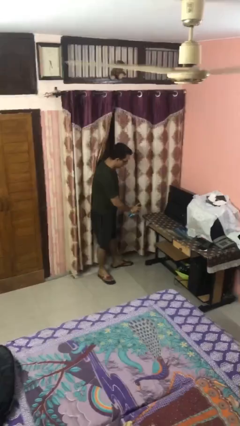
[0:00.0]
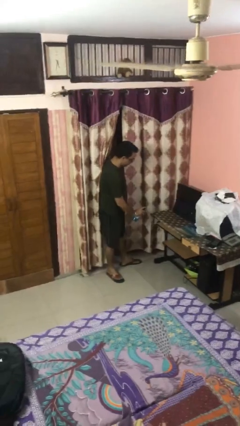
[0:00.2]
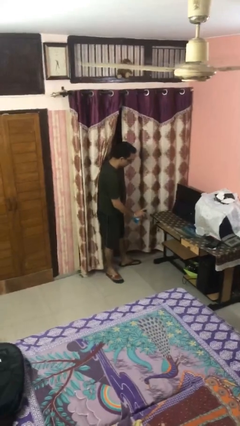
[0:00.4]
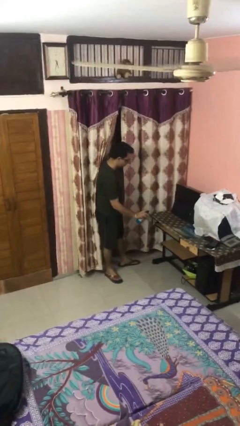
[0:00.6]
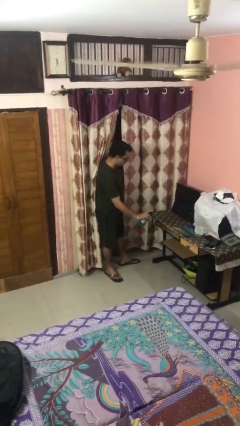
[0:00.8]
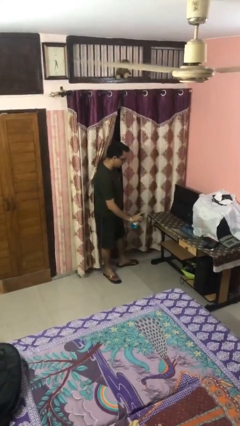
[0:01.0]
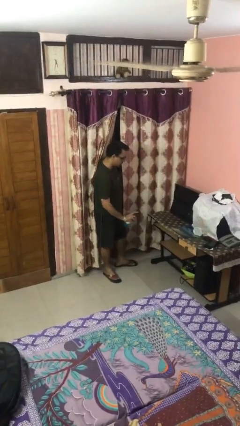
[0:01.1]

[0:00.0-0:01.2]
person sprays from bottle

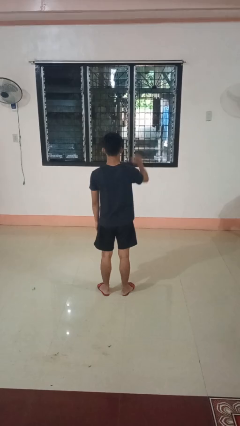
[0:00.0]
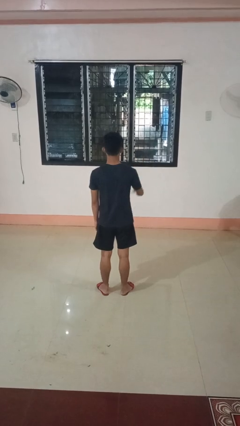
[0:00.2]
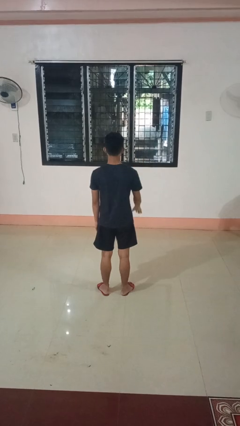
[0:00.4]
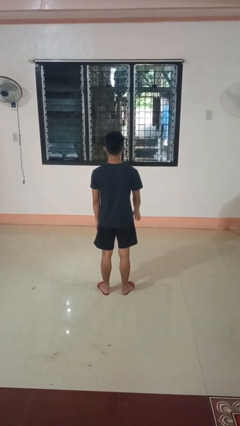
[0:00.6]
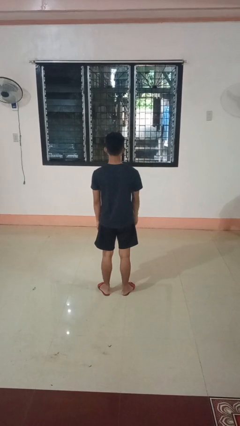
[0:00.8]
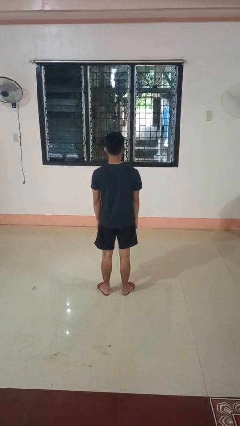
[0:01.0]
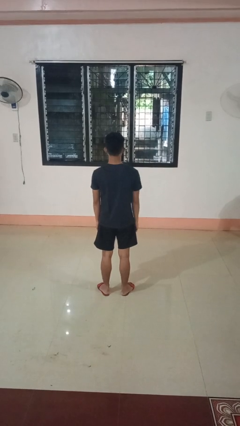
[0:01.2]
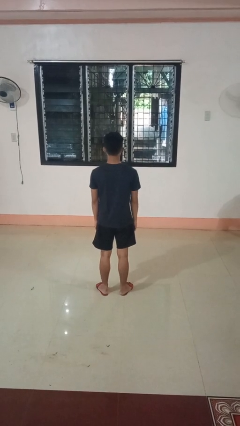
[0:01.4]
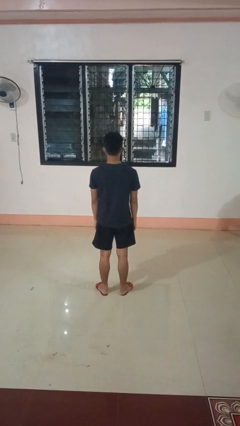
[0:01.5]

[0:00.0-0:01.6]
person gestures swipe down

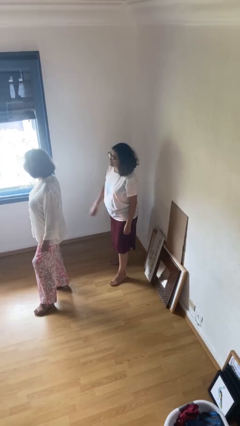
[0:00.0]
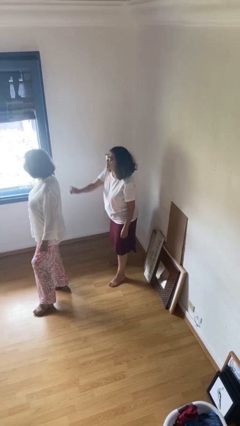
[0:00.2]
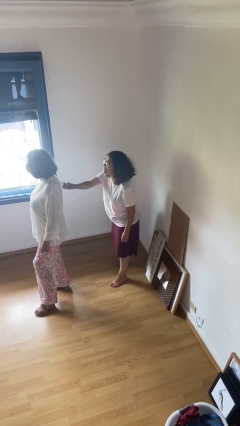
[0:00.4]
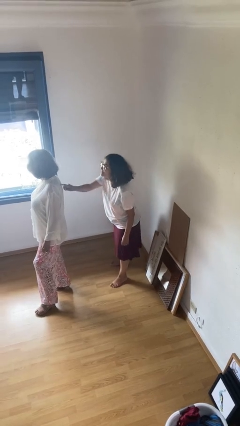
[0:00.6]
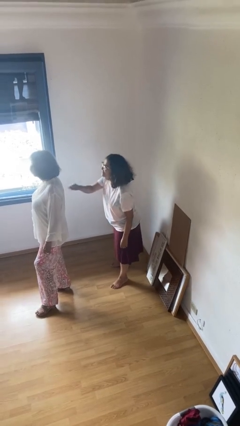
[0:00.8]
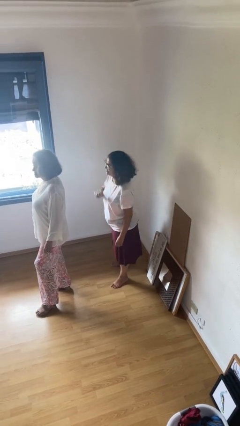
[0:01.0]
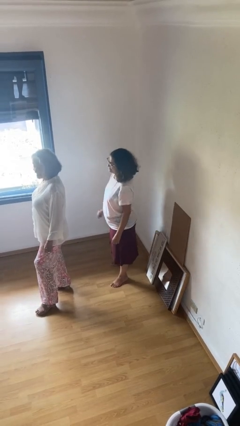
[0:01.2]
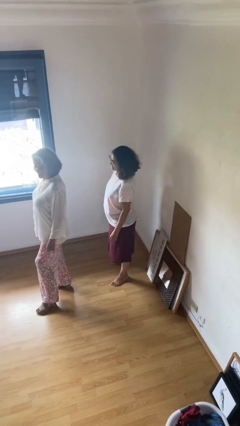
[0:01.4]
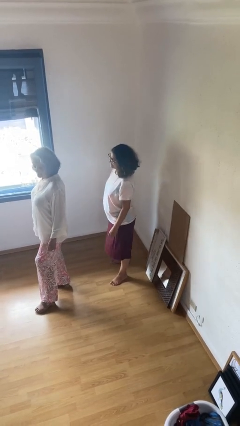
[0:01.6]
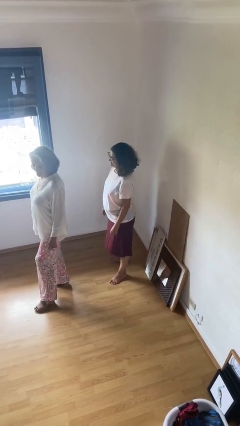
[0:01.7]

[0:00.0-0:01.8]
person touches back of person

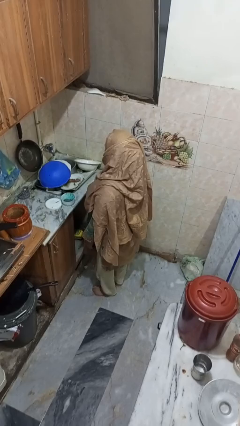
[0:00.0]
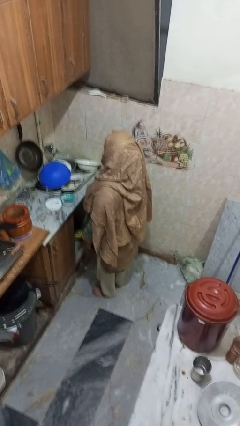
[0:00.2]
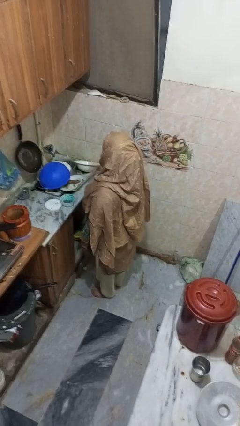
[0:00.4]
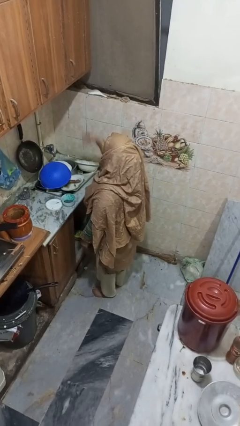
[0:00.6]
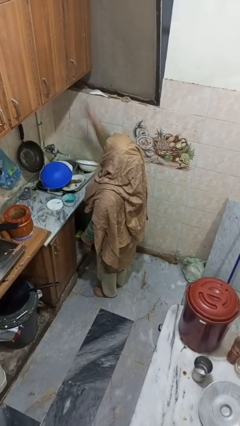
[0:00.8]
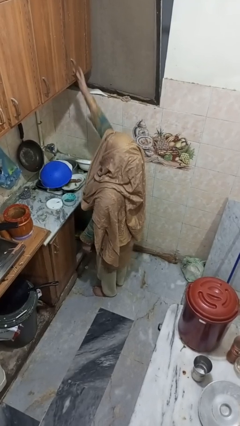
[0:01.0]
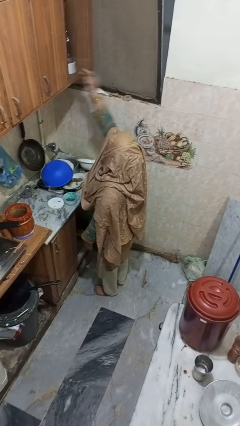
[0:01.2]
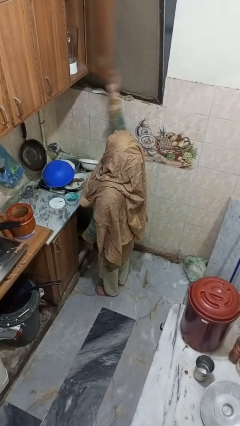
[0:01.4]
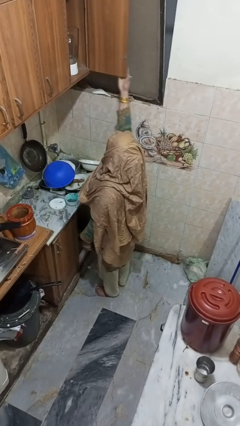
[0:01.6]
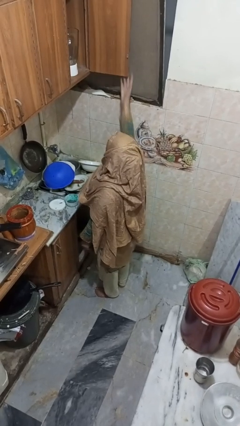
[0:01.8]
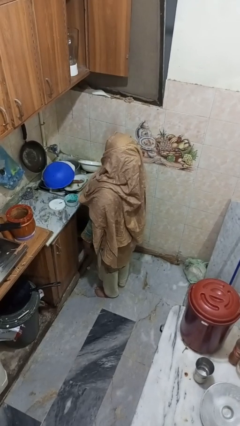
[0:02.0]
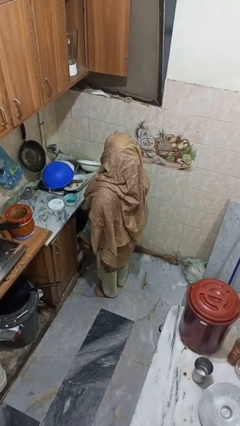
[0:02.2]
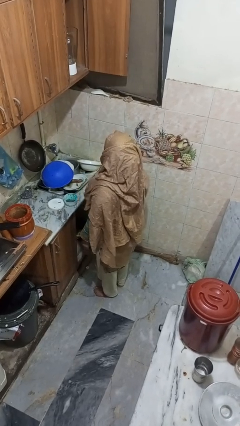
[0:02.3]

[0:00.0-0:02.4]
person opens cabinet

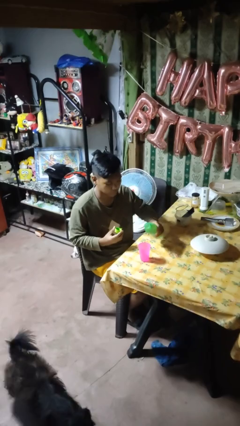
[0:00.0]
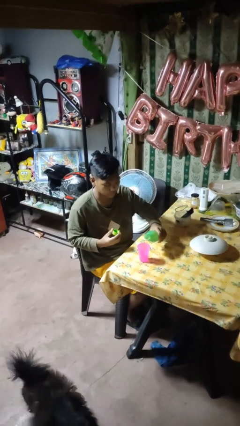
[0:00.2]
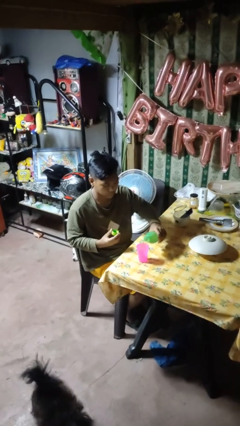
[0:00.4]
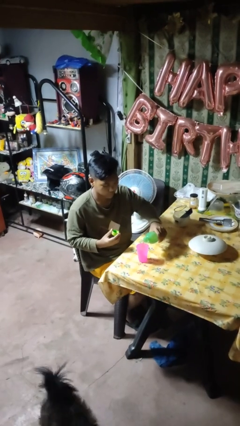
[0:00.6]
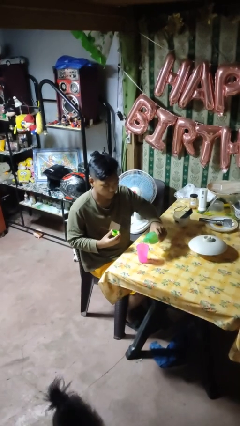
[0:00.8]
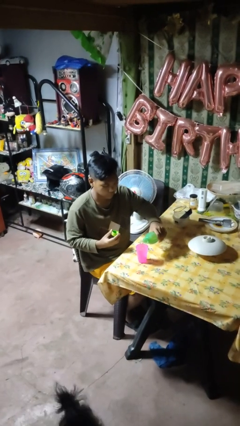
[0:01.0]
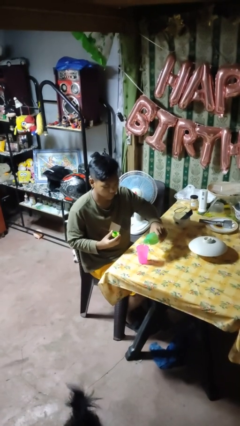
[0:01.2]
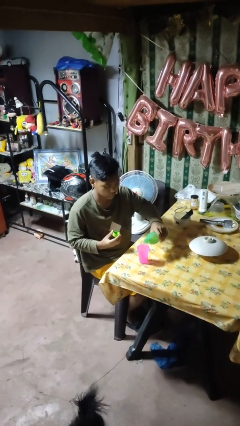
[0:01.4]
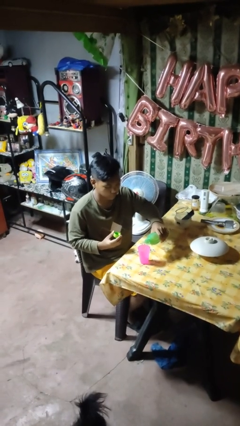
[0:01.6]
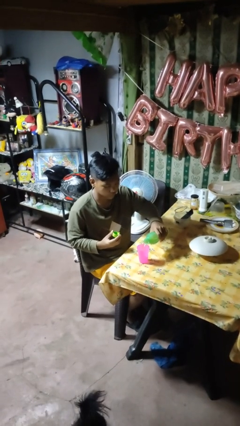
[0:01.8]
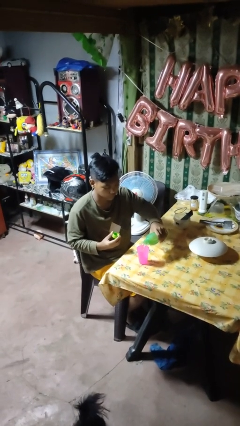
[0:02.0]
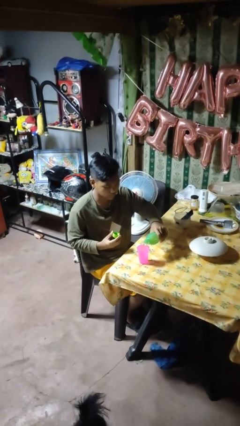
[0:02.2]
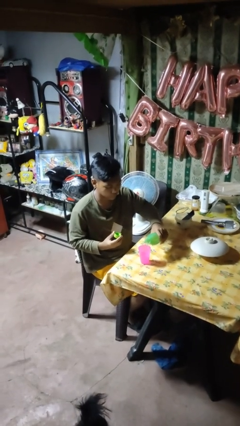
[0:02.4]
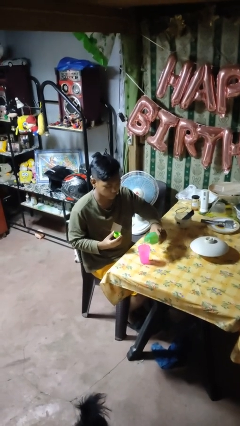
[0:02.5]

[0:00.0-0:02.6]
person pours liquid into cup

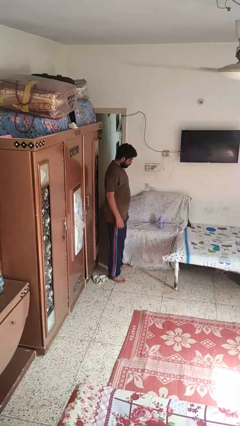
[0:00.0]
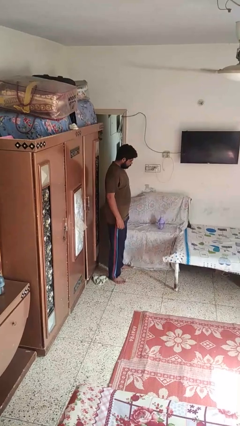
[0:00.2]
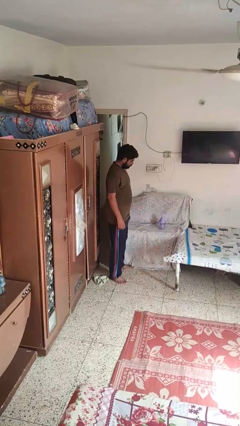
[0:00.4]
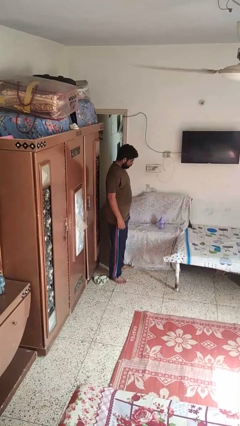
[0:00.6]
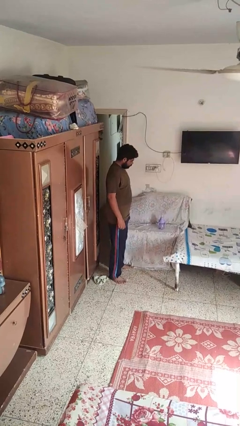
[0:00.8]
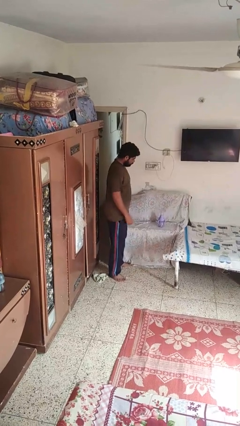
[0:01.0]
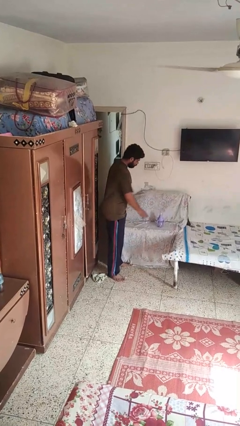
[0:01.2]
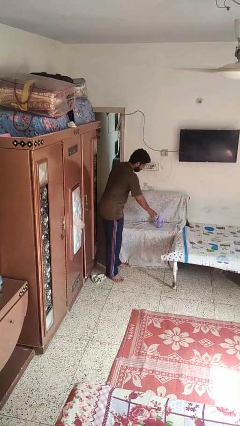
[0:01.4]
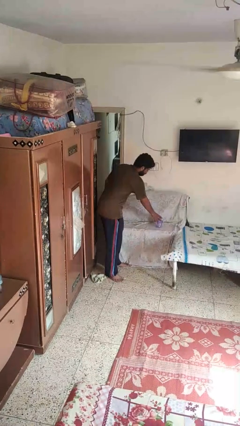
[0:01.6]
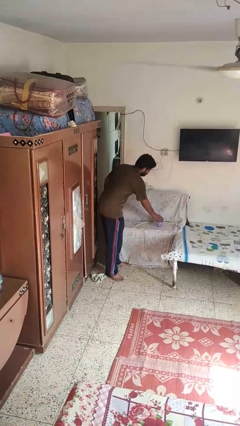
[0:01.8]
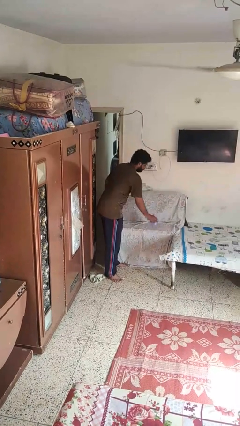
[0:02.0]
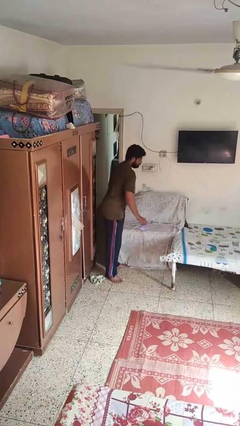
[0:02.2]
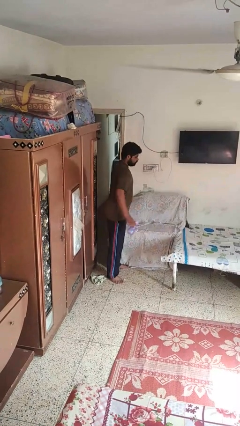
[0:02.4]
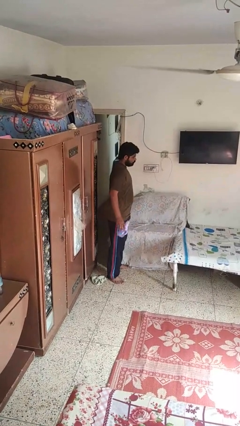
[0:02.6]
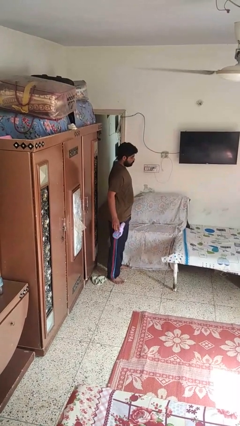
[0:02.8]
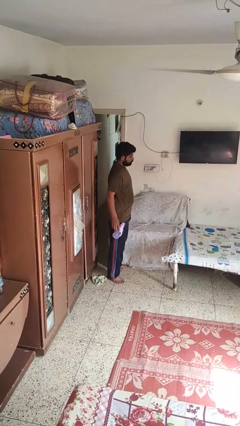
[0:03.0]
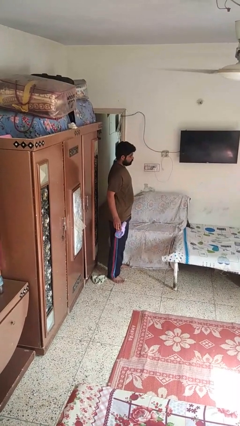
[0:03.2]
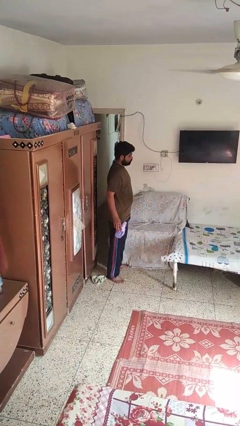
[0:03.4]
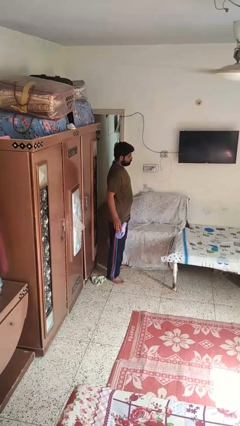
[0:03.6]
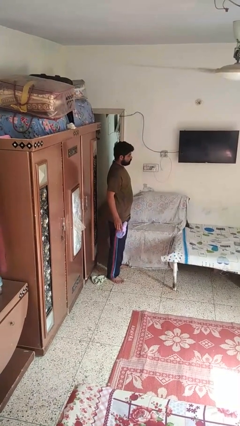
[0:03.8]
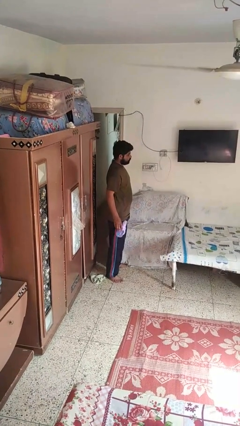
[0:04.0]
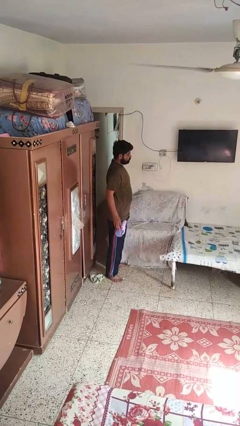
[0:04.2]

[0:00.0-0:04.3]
person picks up object from couch

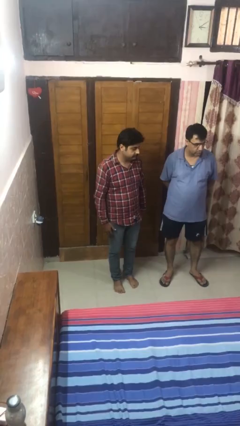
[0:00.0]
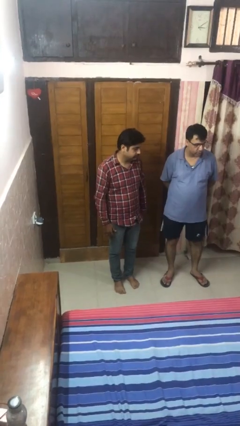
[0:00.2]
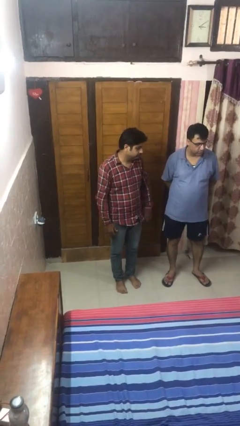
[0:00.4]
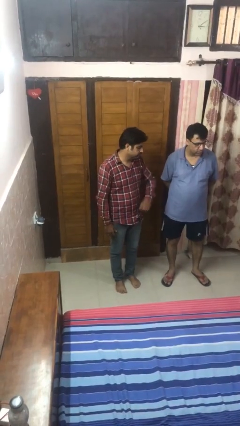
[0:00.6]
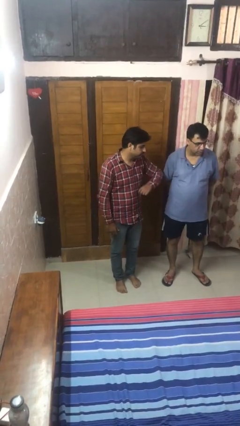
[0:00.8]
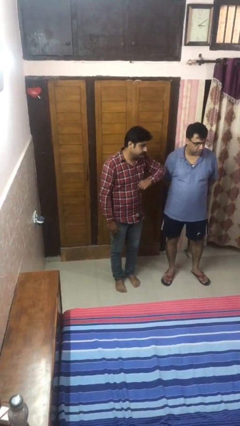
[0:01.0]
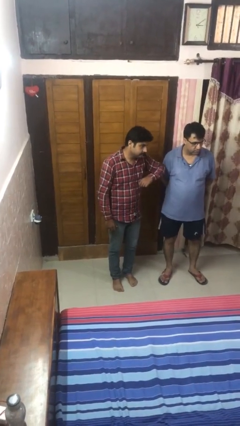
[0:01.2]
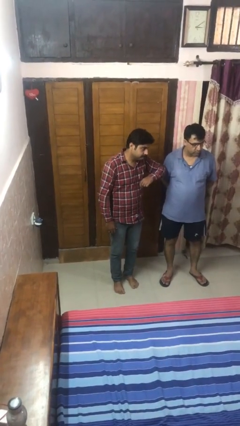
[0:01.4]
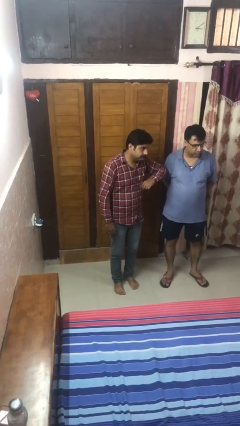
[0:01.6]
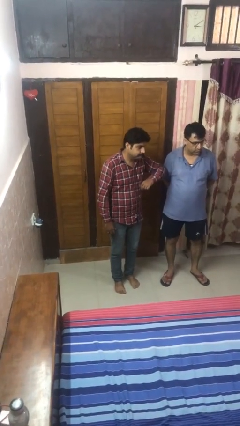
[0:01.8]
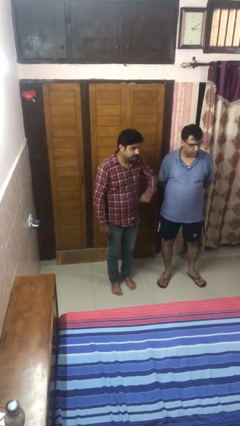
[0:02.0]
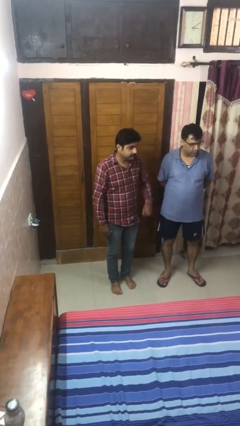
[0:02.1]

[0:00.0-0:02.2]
person nudges person with elbow

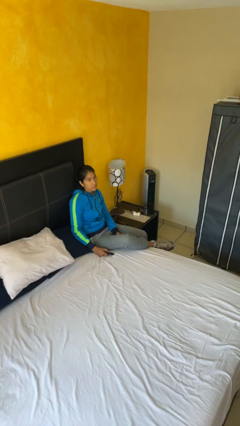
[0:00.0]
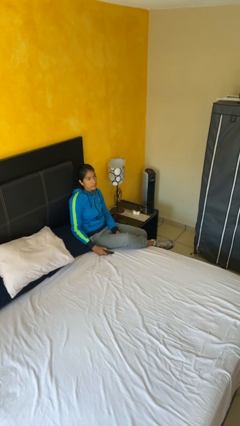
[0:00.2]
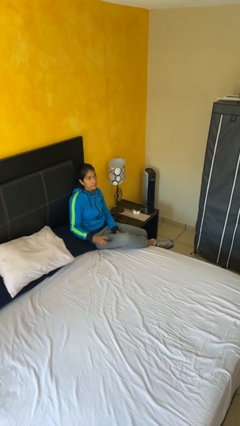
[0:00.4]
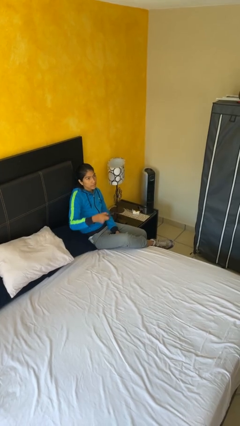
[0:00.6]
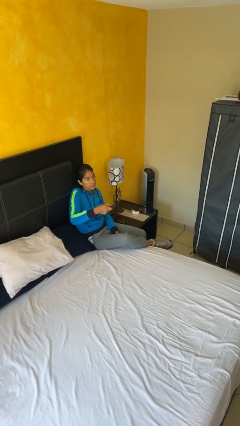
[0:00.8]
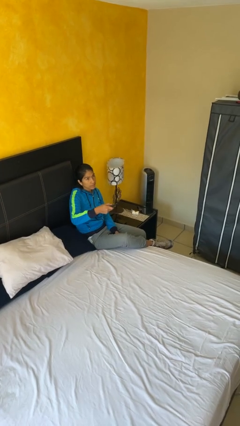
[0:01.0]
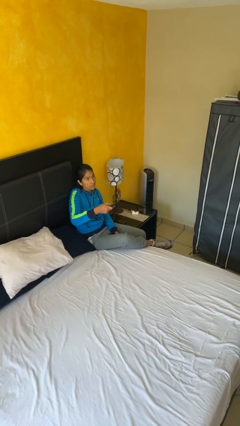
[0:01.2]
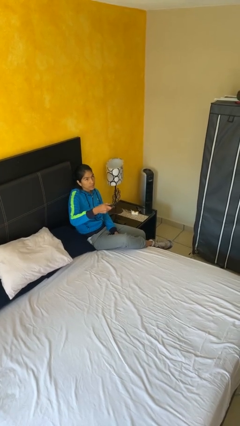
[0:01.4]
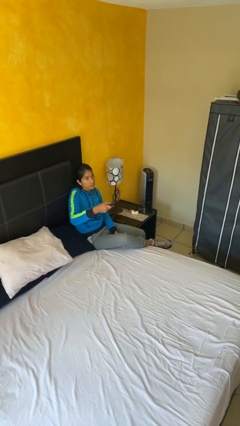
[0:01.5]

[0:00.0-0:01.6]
person uses television remote
